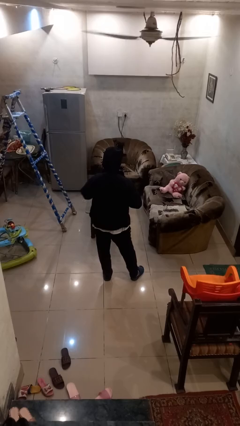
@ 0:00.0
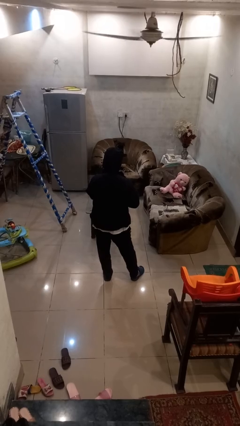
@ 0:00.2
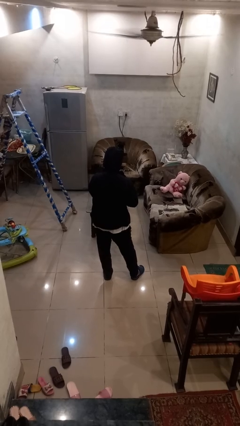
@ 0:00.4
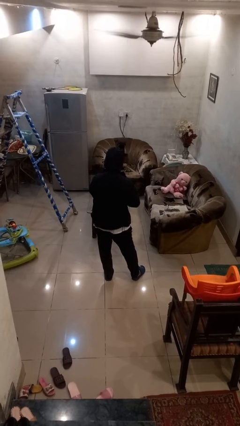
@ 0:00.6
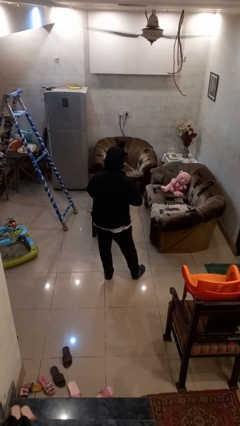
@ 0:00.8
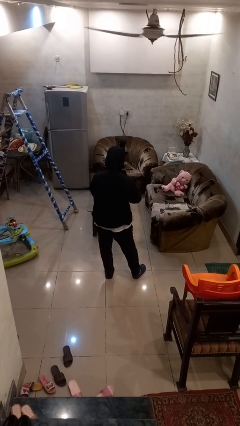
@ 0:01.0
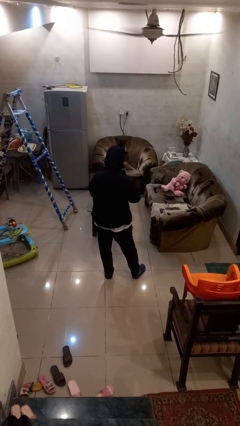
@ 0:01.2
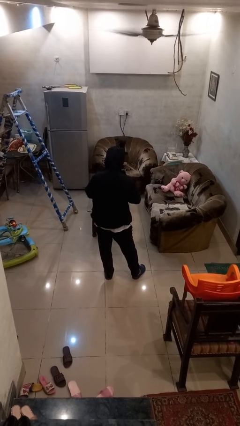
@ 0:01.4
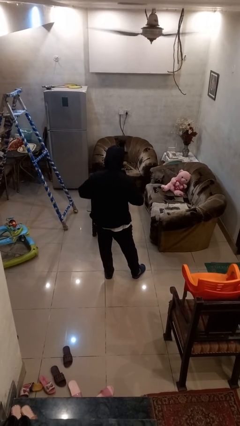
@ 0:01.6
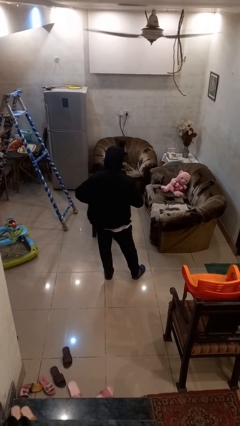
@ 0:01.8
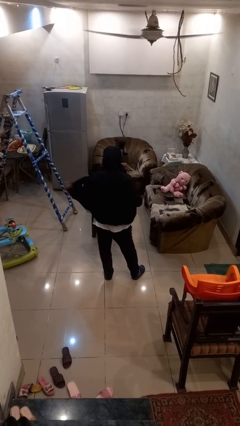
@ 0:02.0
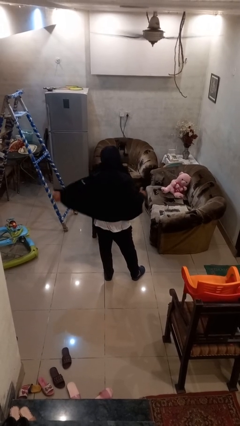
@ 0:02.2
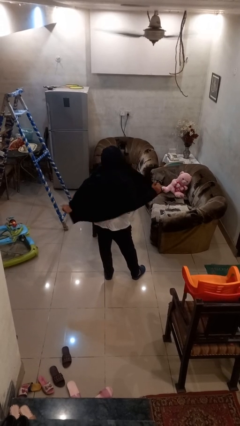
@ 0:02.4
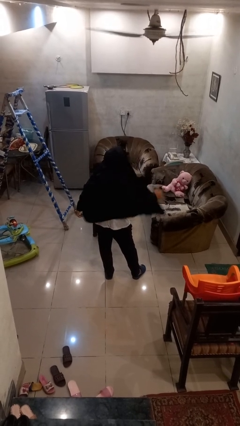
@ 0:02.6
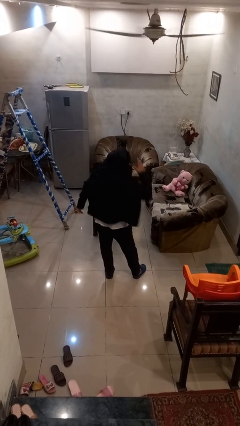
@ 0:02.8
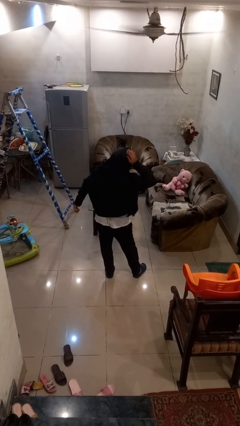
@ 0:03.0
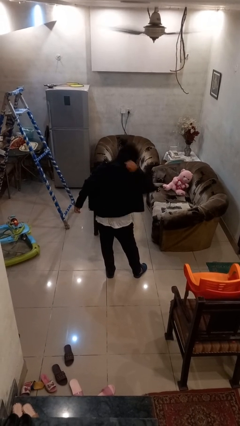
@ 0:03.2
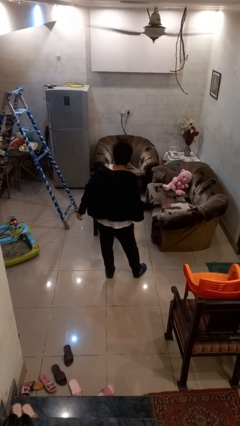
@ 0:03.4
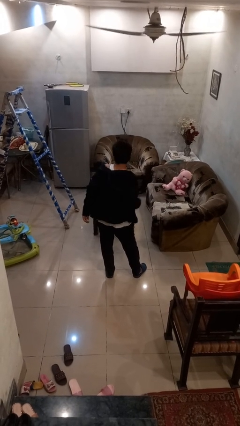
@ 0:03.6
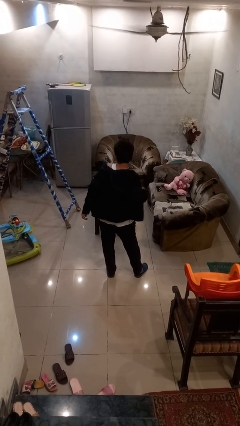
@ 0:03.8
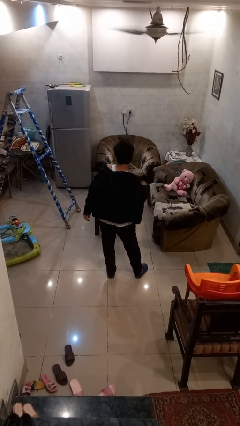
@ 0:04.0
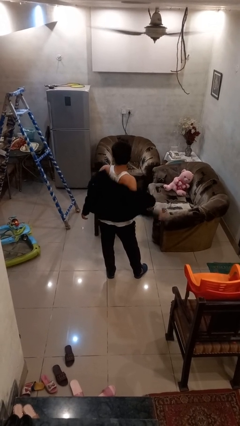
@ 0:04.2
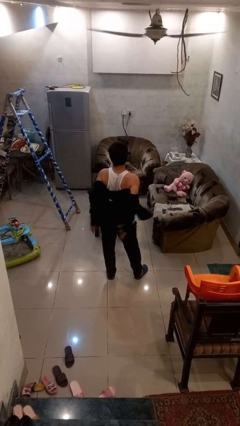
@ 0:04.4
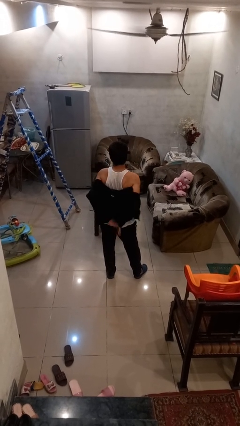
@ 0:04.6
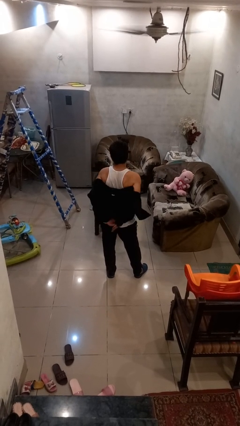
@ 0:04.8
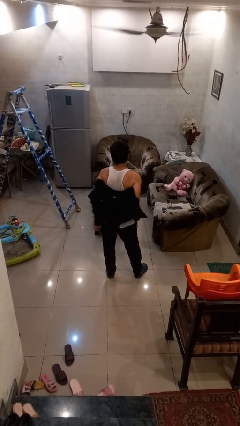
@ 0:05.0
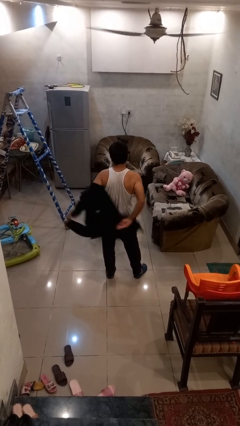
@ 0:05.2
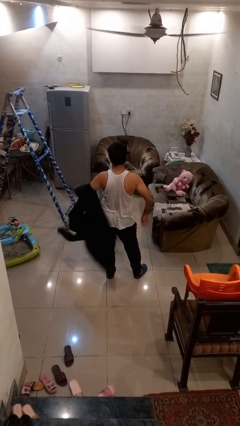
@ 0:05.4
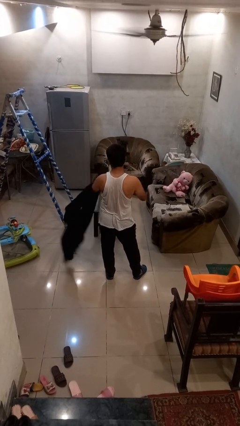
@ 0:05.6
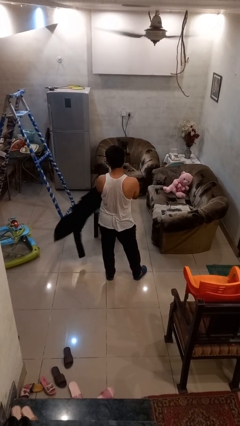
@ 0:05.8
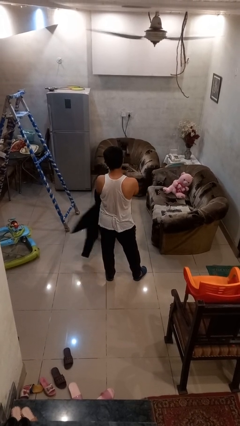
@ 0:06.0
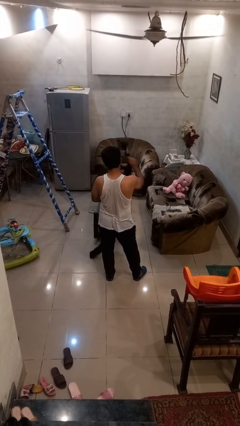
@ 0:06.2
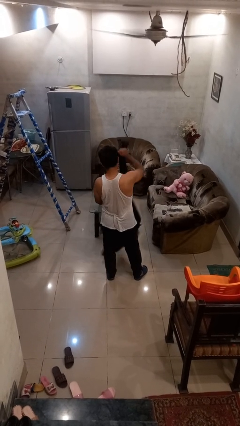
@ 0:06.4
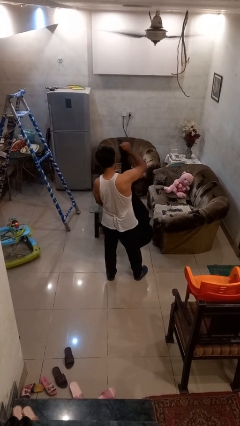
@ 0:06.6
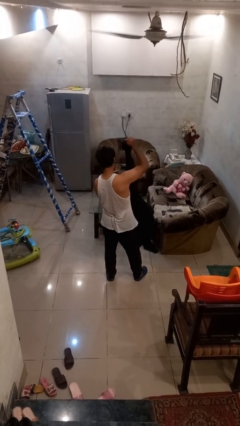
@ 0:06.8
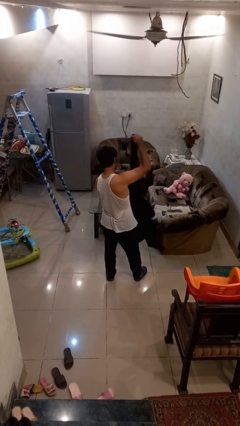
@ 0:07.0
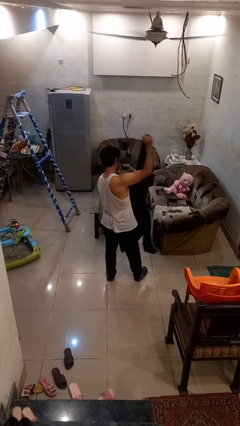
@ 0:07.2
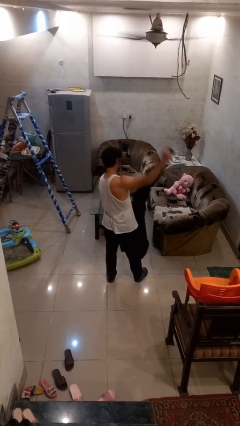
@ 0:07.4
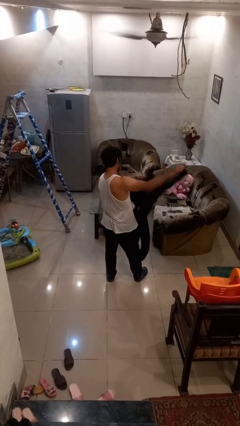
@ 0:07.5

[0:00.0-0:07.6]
person takes off hoodie

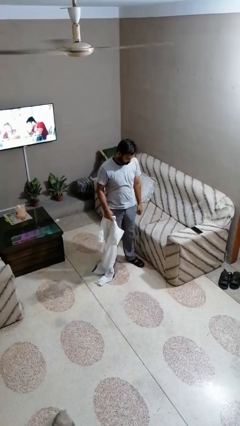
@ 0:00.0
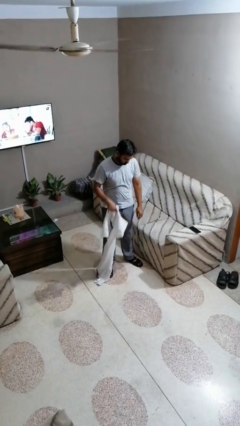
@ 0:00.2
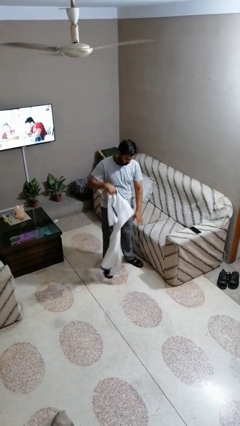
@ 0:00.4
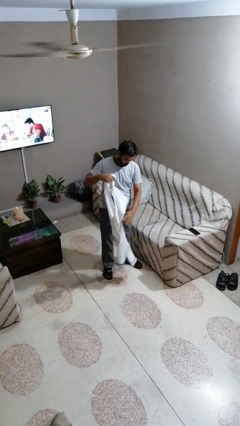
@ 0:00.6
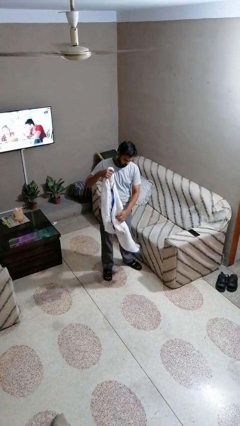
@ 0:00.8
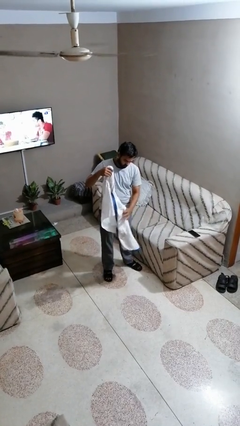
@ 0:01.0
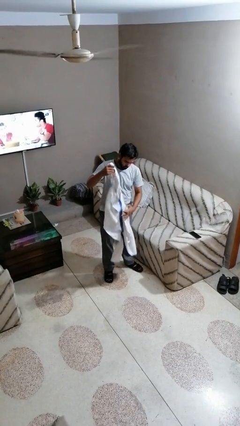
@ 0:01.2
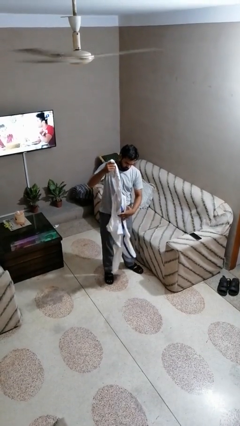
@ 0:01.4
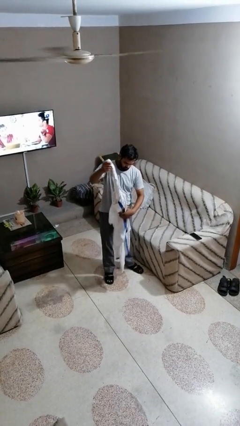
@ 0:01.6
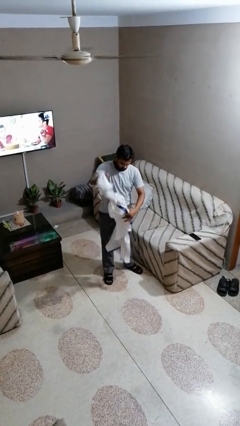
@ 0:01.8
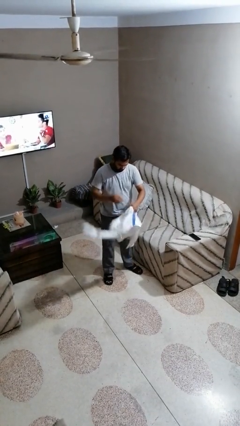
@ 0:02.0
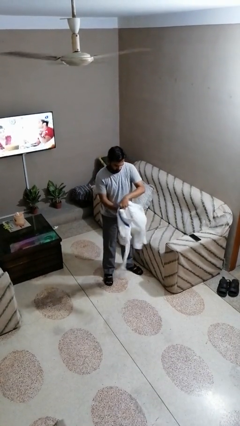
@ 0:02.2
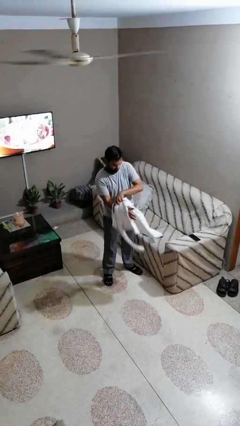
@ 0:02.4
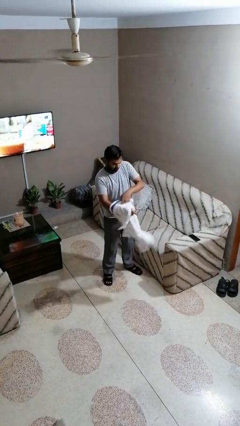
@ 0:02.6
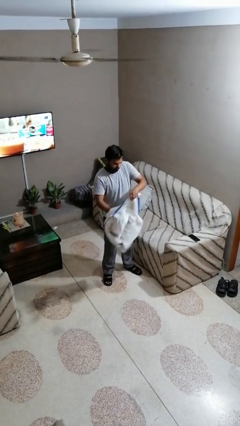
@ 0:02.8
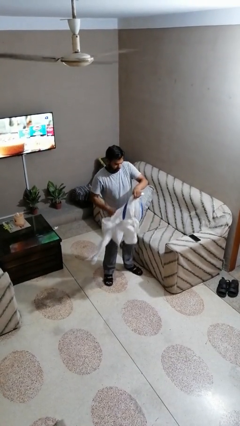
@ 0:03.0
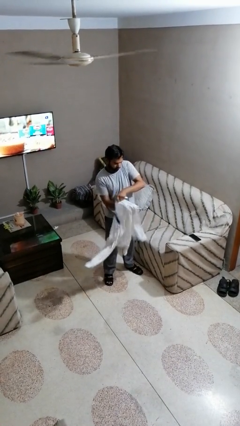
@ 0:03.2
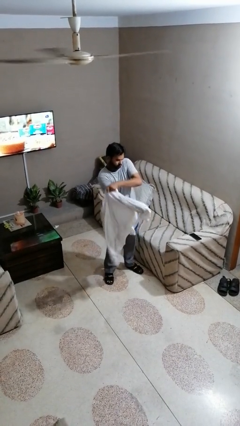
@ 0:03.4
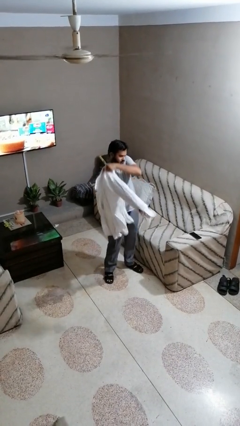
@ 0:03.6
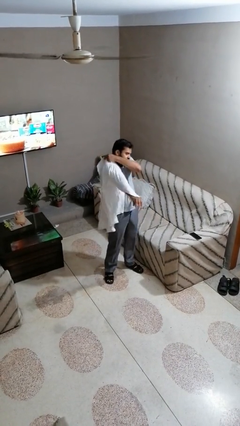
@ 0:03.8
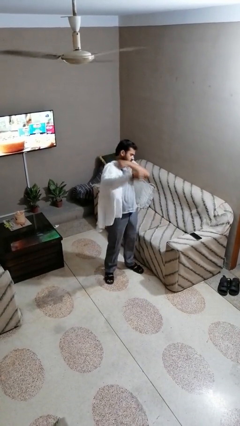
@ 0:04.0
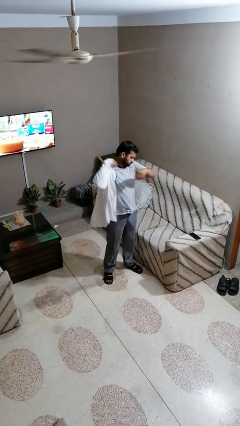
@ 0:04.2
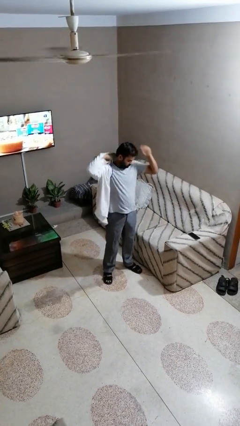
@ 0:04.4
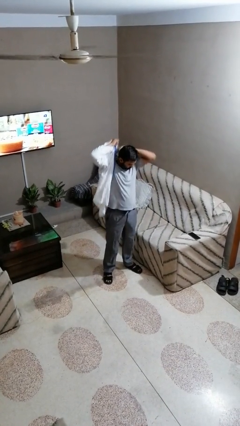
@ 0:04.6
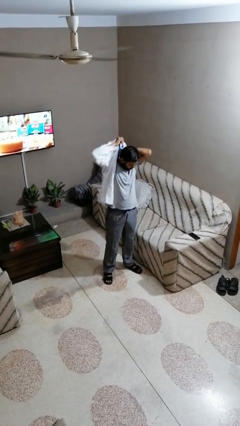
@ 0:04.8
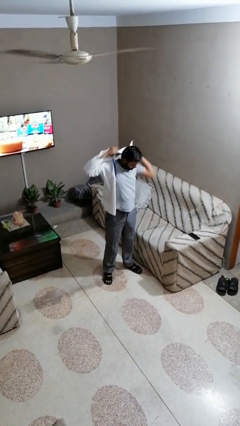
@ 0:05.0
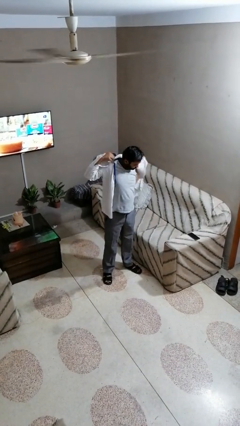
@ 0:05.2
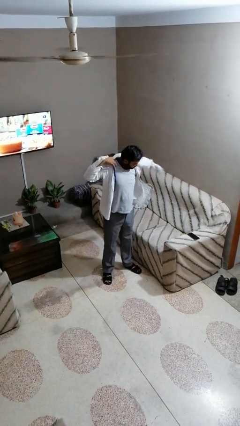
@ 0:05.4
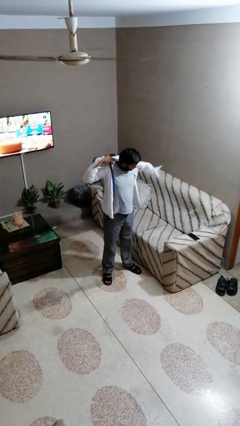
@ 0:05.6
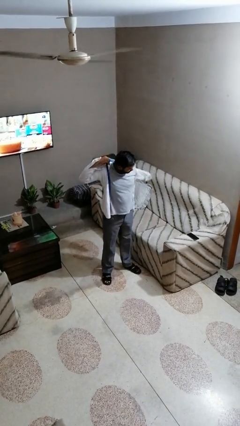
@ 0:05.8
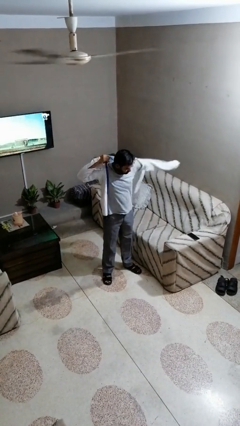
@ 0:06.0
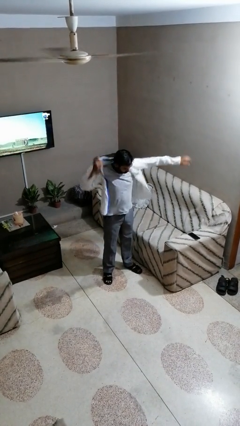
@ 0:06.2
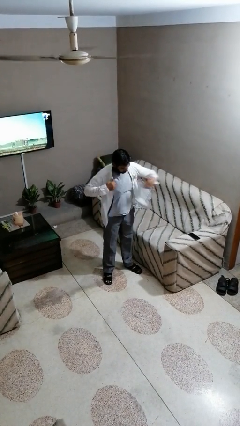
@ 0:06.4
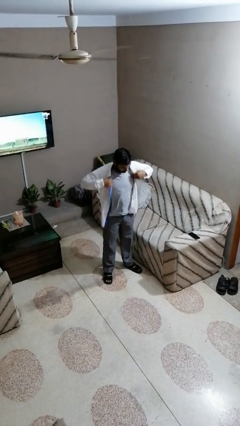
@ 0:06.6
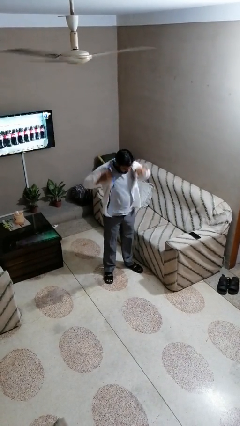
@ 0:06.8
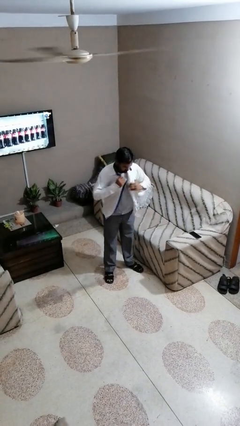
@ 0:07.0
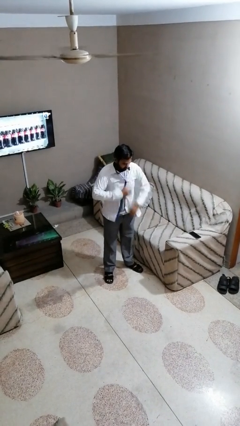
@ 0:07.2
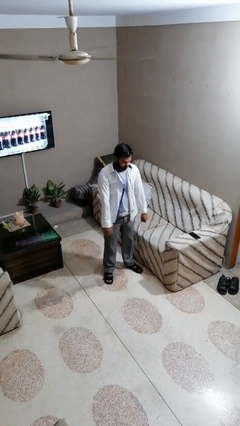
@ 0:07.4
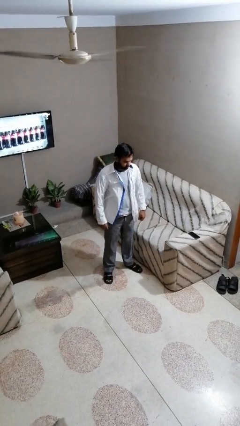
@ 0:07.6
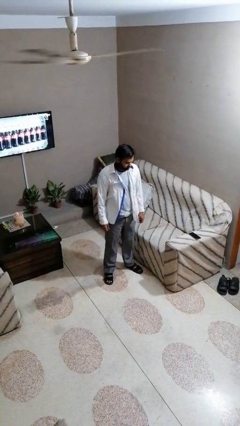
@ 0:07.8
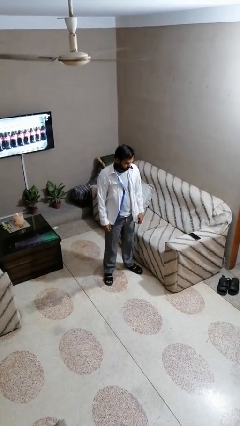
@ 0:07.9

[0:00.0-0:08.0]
person puts on shirt

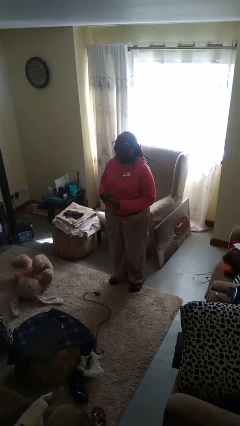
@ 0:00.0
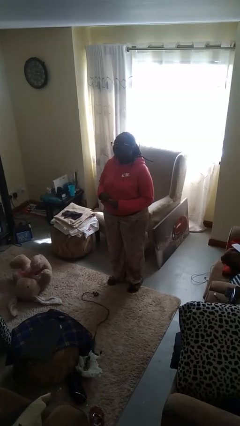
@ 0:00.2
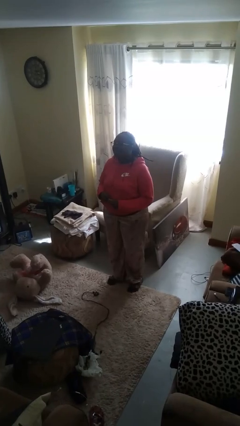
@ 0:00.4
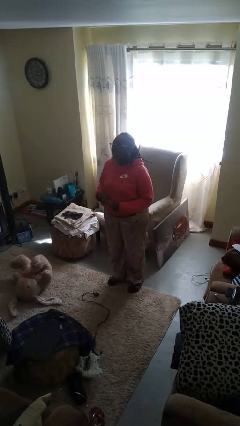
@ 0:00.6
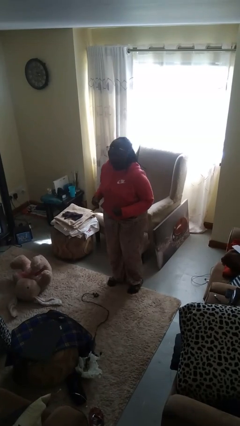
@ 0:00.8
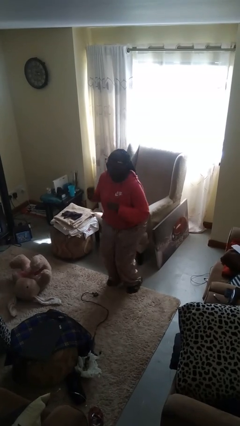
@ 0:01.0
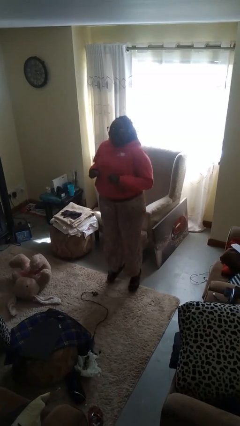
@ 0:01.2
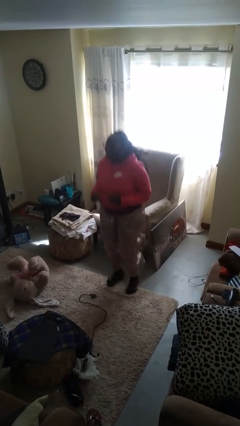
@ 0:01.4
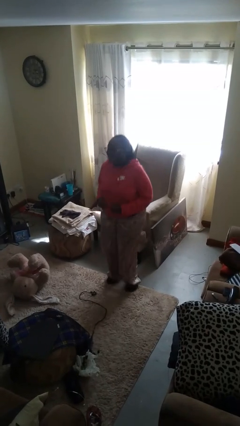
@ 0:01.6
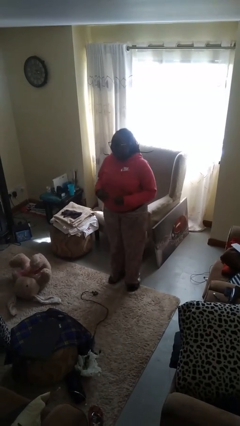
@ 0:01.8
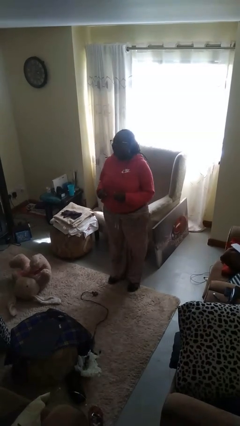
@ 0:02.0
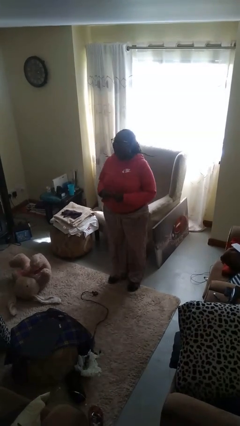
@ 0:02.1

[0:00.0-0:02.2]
person jumps
